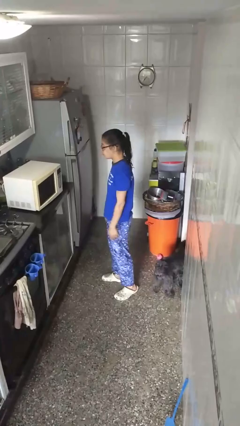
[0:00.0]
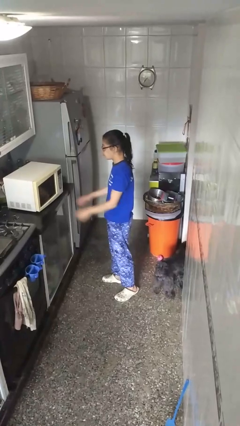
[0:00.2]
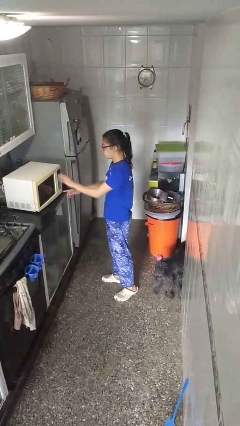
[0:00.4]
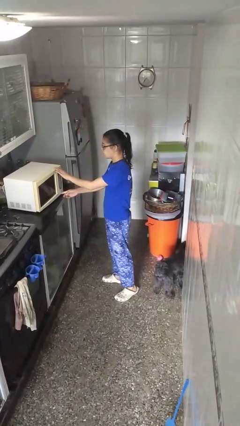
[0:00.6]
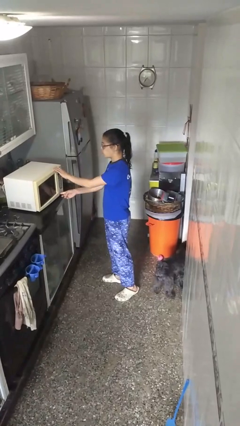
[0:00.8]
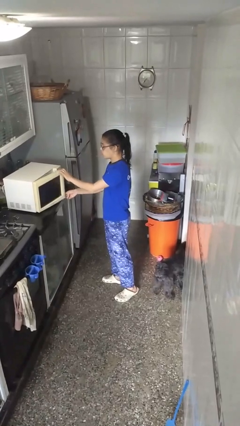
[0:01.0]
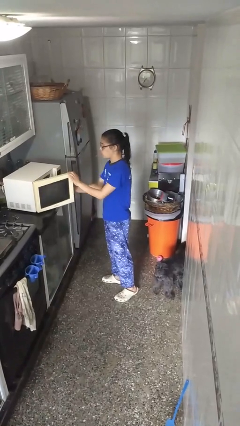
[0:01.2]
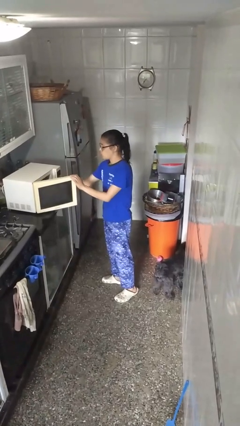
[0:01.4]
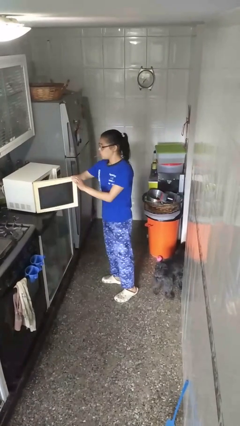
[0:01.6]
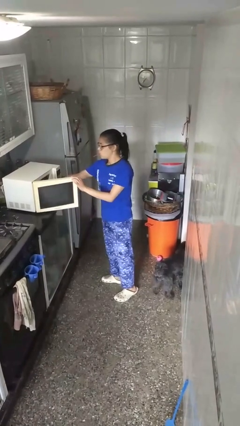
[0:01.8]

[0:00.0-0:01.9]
person takes object from microwave

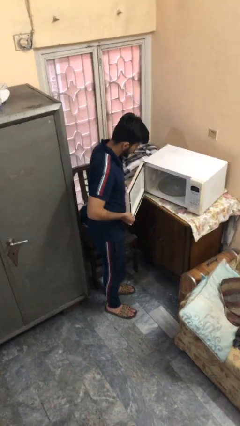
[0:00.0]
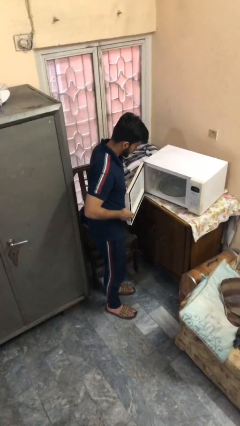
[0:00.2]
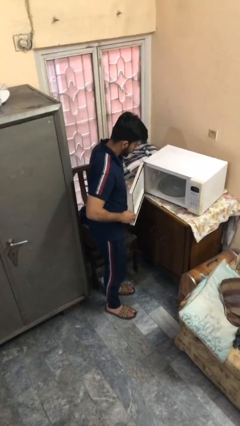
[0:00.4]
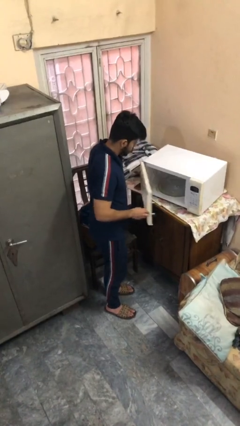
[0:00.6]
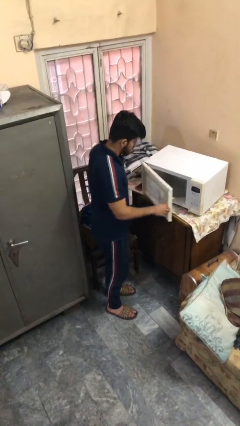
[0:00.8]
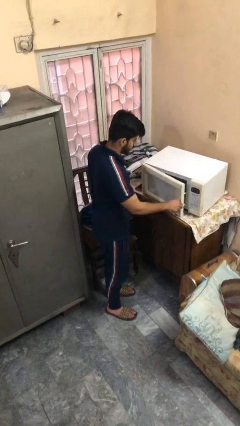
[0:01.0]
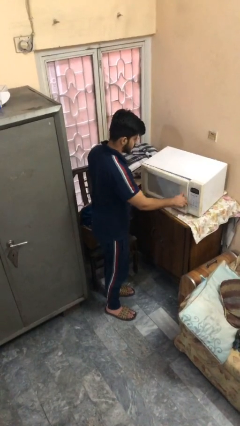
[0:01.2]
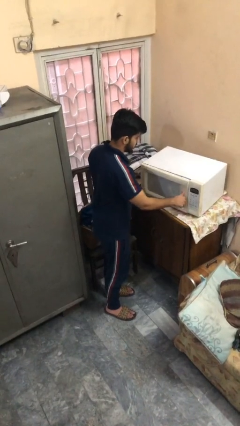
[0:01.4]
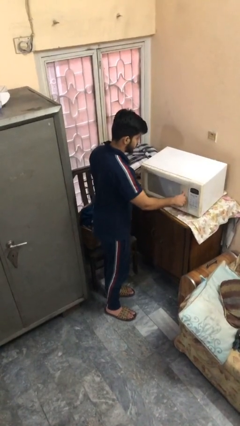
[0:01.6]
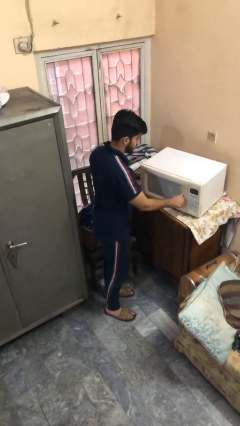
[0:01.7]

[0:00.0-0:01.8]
person closes microwave

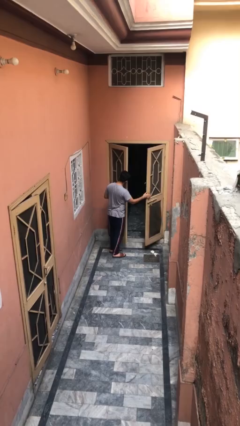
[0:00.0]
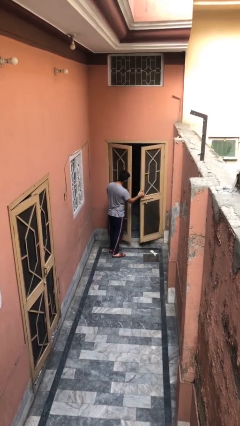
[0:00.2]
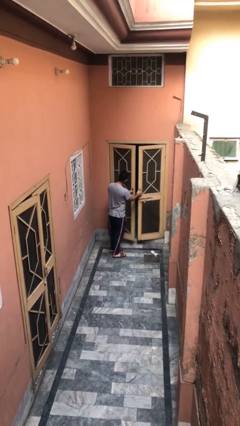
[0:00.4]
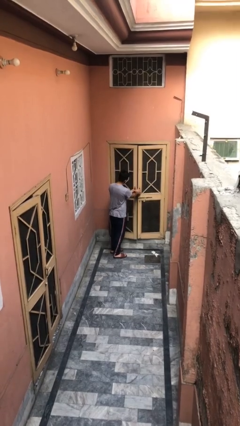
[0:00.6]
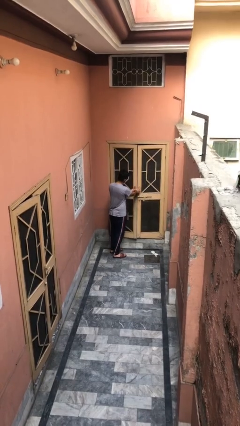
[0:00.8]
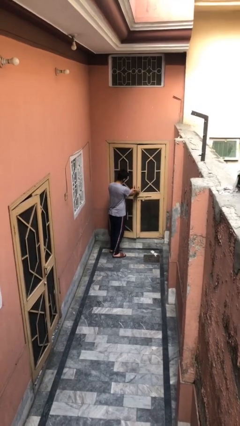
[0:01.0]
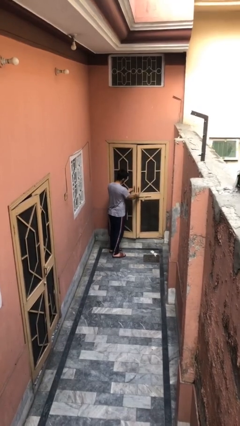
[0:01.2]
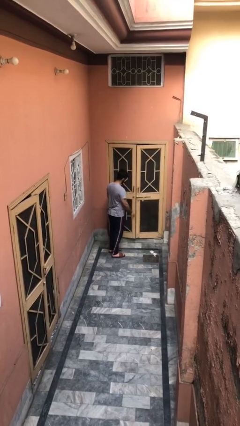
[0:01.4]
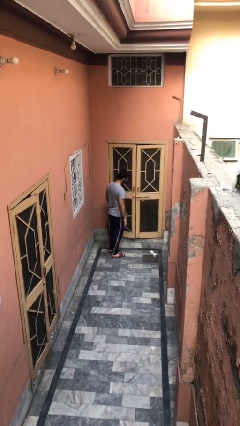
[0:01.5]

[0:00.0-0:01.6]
person closes gate

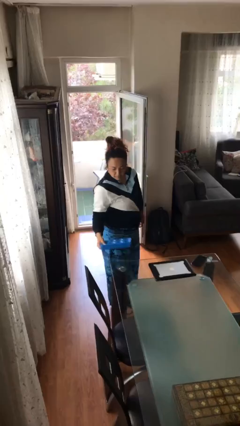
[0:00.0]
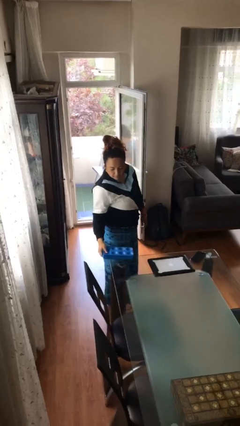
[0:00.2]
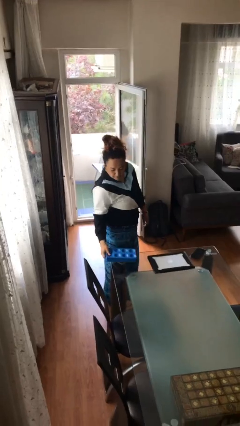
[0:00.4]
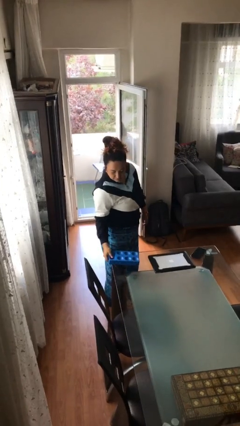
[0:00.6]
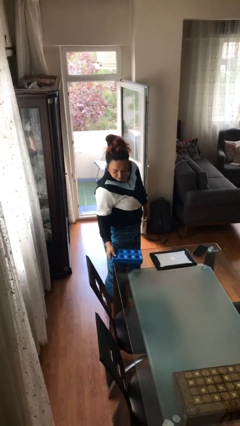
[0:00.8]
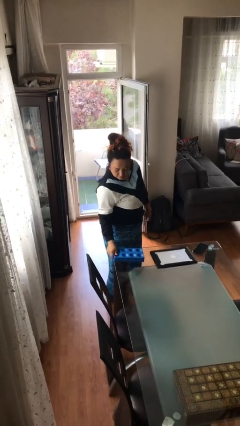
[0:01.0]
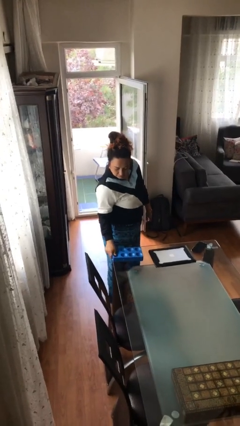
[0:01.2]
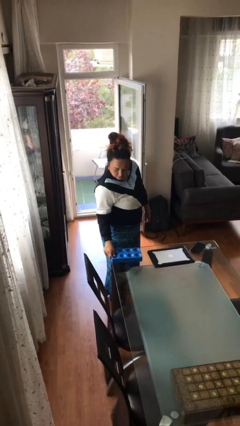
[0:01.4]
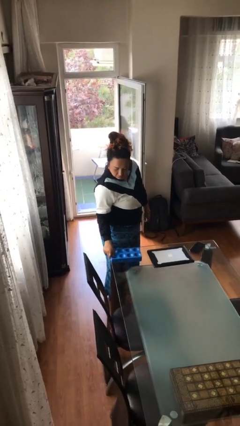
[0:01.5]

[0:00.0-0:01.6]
person puts down object on table

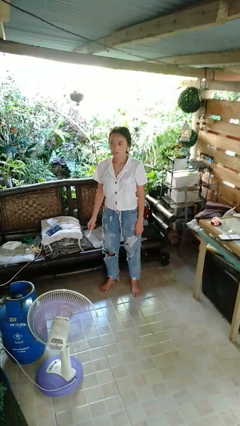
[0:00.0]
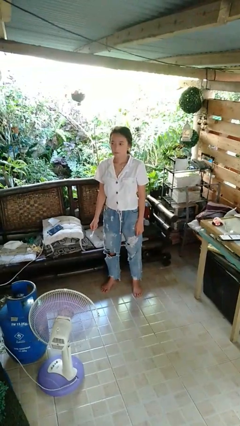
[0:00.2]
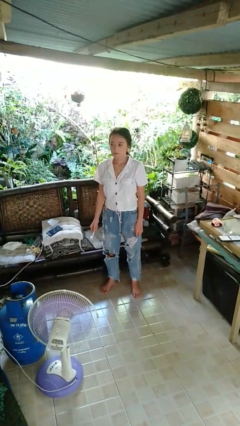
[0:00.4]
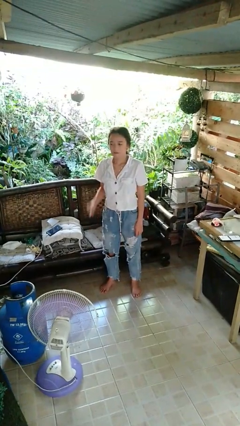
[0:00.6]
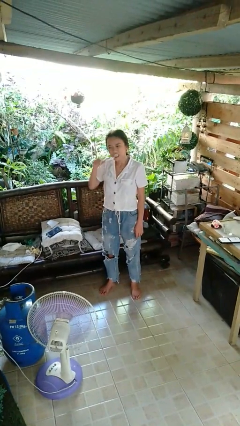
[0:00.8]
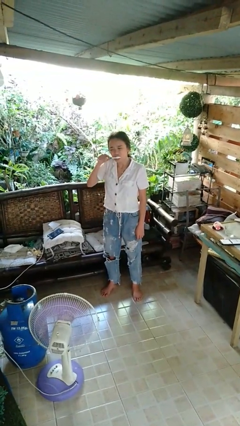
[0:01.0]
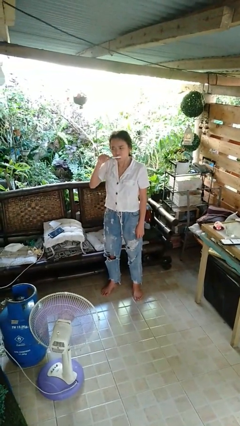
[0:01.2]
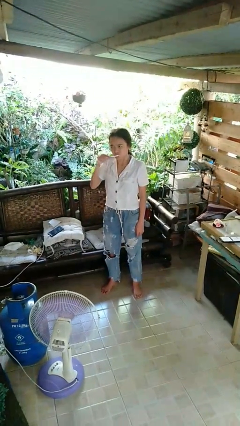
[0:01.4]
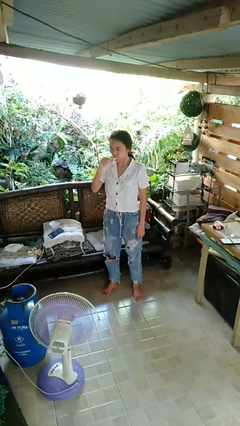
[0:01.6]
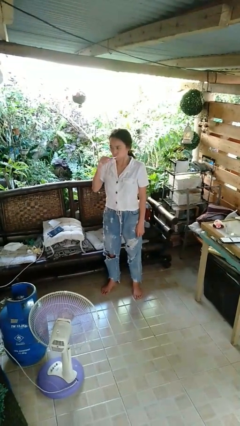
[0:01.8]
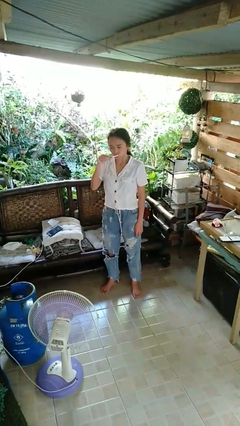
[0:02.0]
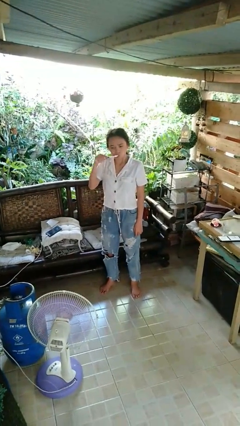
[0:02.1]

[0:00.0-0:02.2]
person brushes teeth

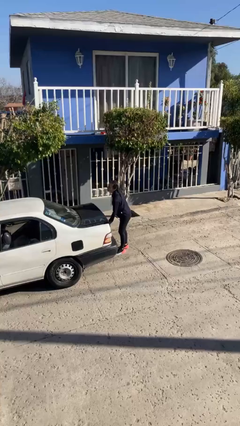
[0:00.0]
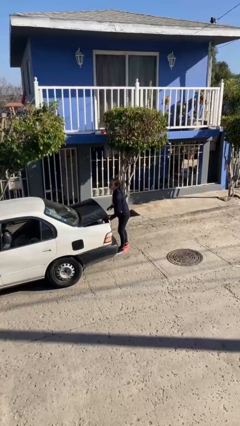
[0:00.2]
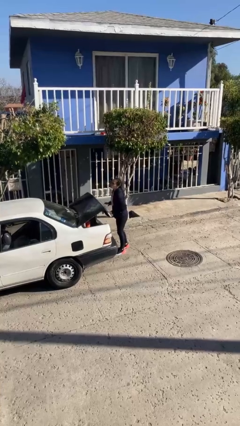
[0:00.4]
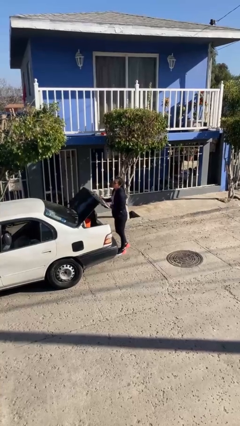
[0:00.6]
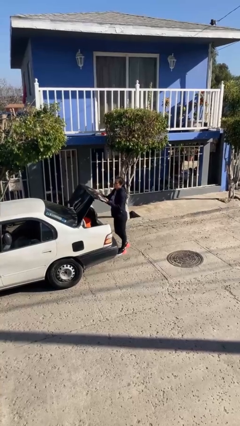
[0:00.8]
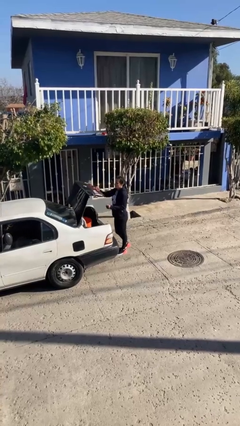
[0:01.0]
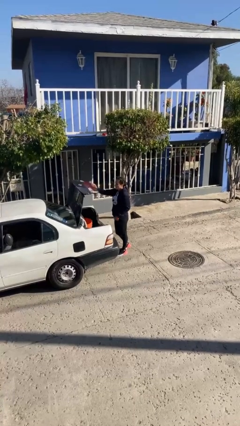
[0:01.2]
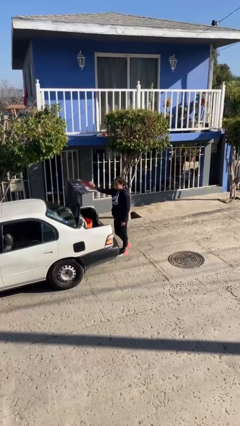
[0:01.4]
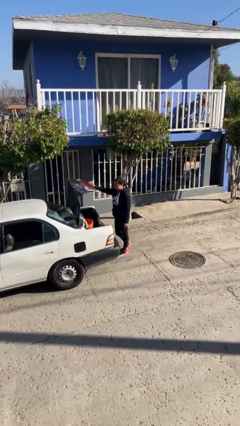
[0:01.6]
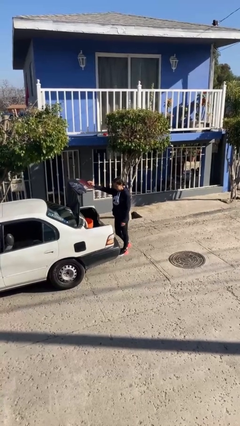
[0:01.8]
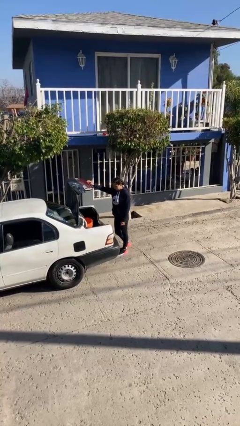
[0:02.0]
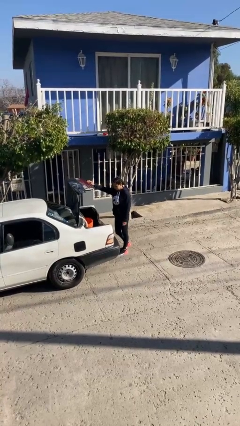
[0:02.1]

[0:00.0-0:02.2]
person opens car trunk

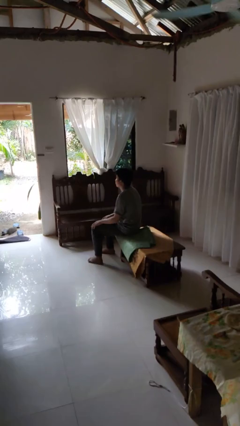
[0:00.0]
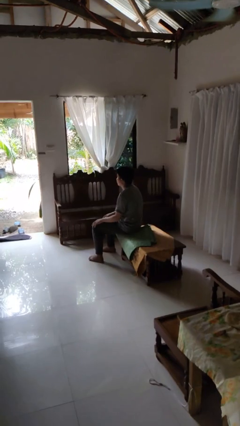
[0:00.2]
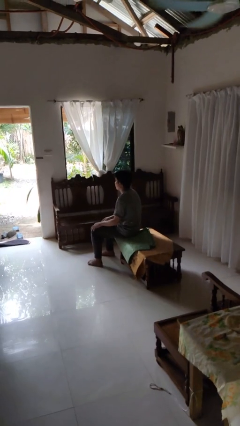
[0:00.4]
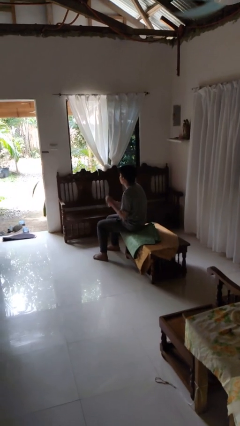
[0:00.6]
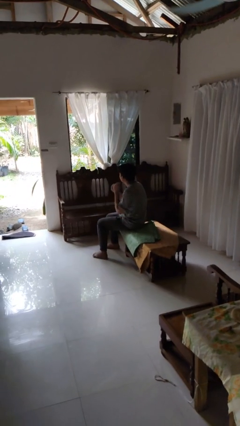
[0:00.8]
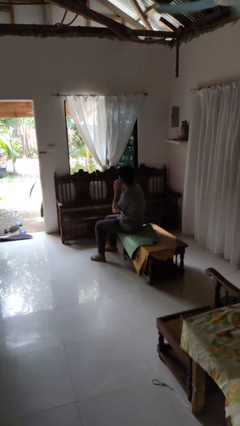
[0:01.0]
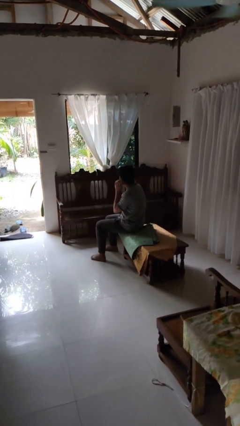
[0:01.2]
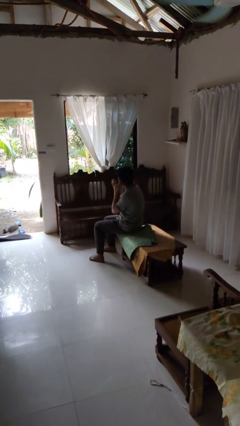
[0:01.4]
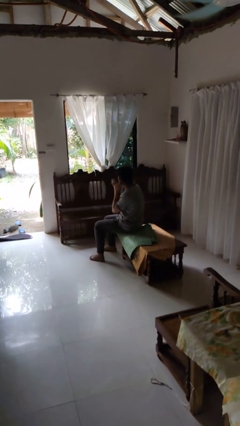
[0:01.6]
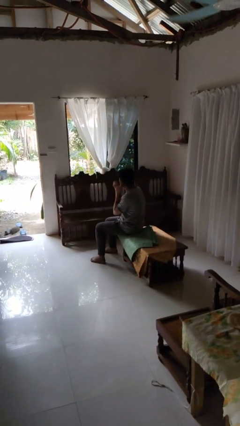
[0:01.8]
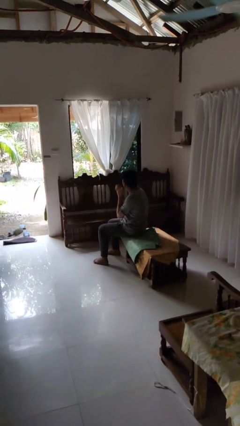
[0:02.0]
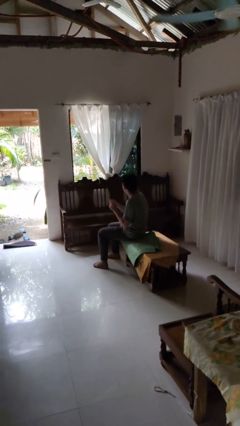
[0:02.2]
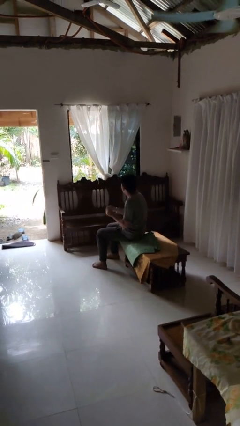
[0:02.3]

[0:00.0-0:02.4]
person takes off earrings

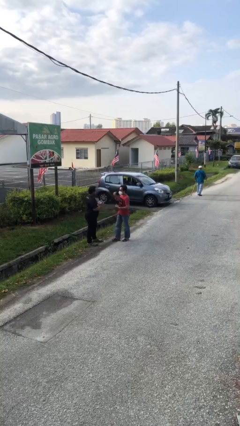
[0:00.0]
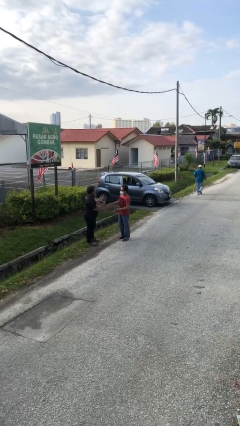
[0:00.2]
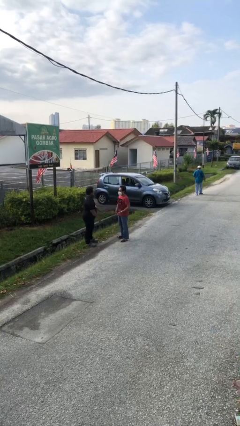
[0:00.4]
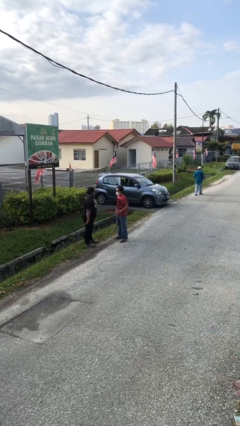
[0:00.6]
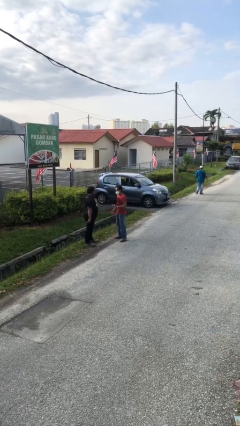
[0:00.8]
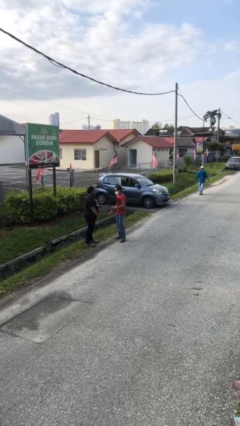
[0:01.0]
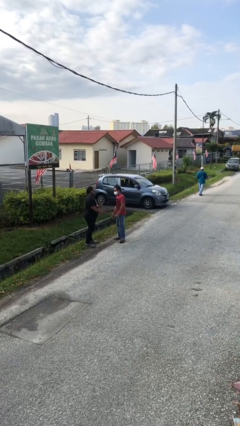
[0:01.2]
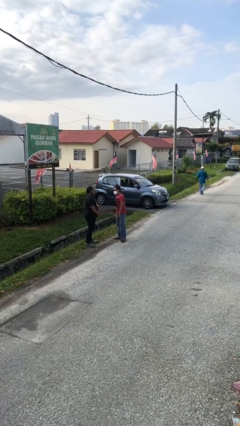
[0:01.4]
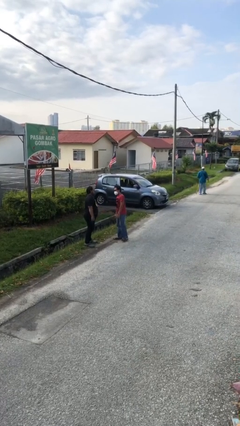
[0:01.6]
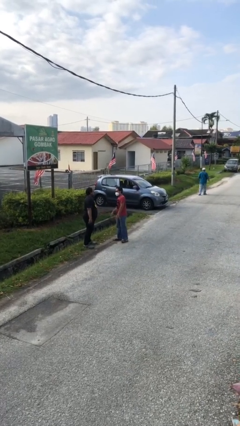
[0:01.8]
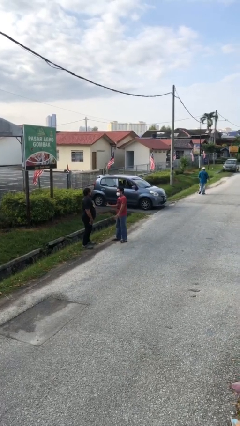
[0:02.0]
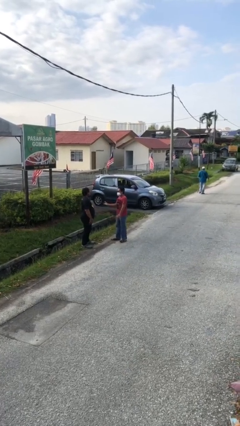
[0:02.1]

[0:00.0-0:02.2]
person talks to person

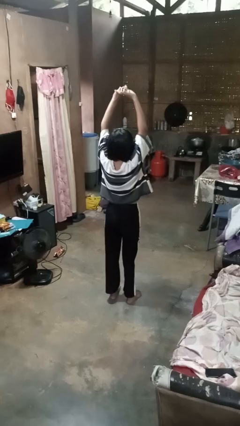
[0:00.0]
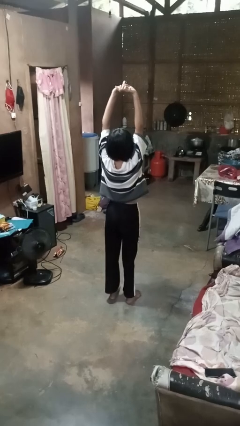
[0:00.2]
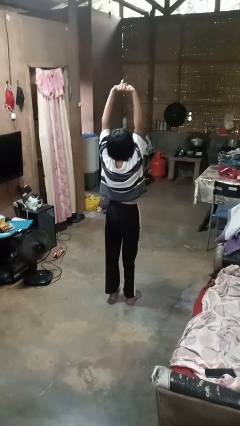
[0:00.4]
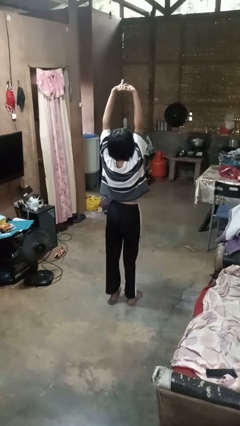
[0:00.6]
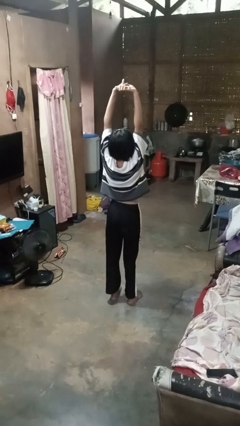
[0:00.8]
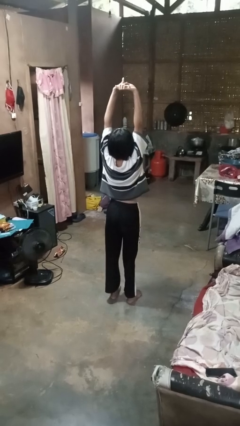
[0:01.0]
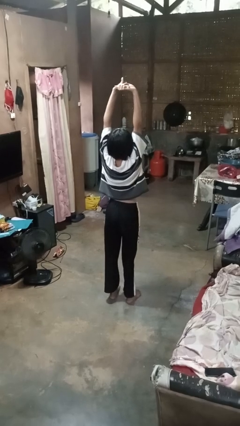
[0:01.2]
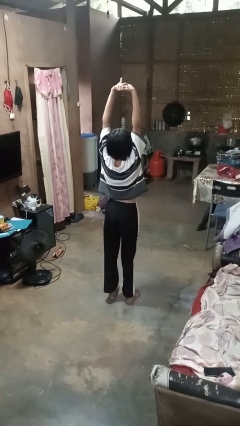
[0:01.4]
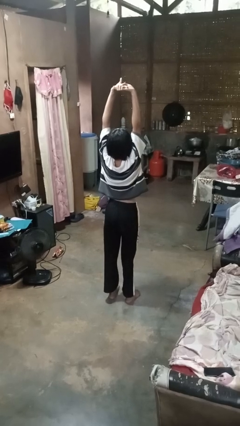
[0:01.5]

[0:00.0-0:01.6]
person stretches arms over head
